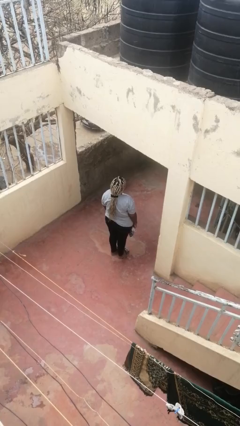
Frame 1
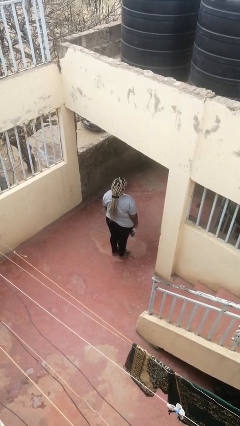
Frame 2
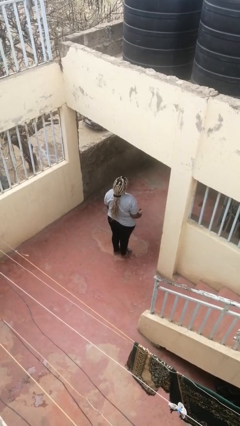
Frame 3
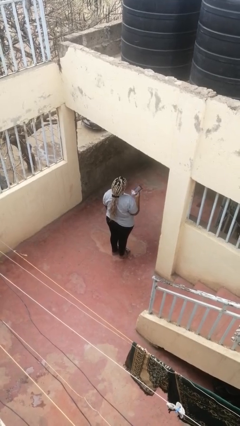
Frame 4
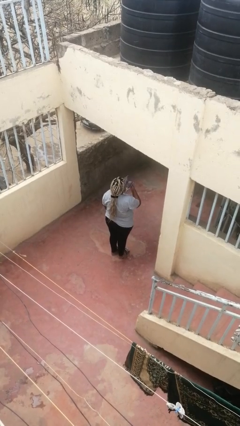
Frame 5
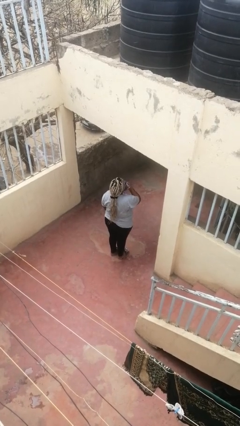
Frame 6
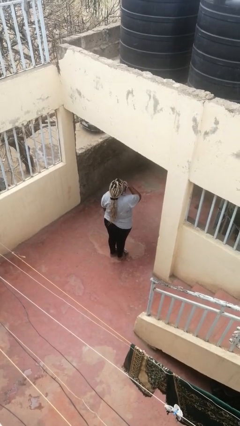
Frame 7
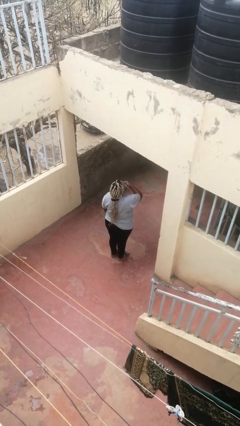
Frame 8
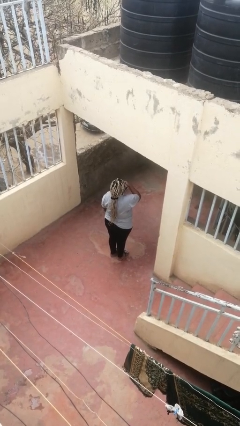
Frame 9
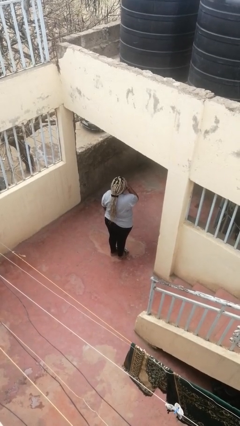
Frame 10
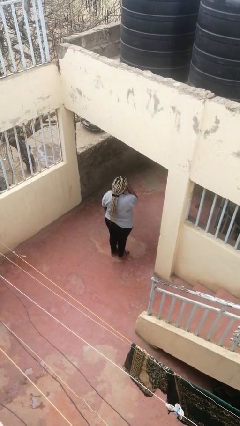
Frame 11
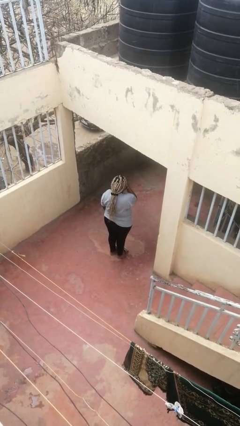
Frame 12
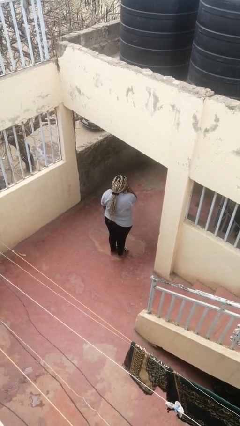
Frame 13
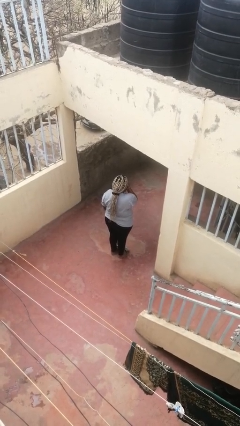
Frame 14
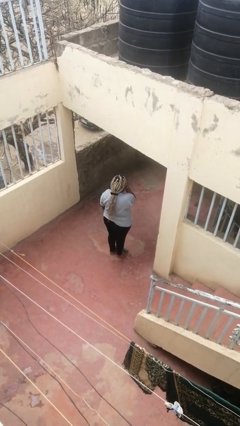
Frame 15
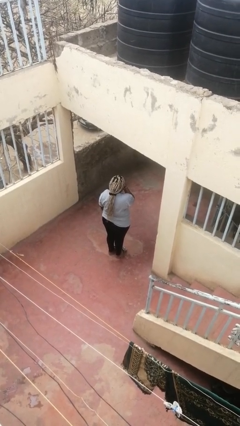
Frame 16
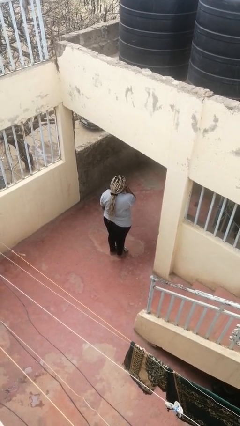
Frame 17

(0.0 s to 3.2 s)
person blows nose

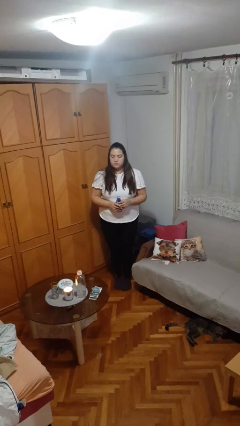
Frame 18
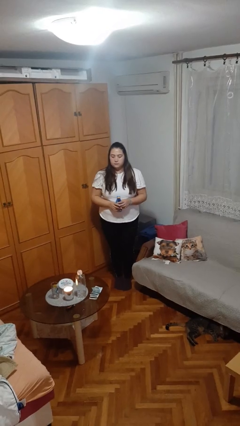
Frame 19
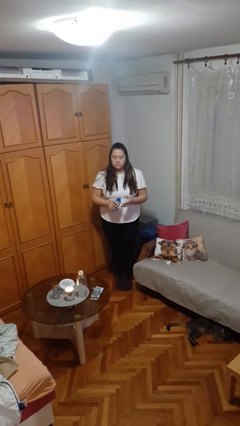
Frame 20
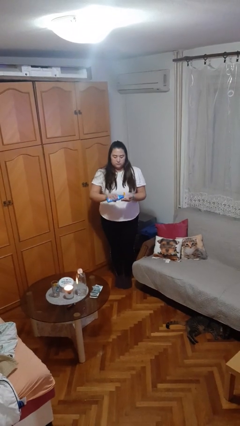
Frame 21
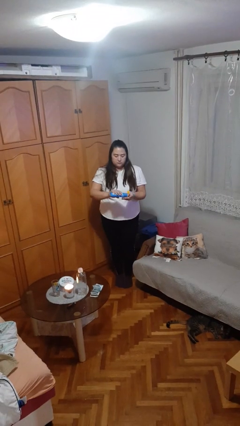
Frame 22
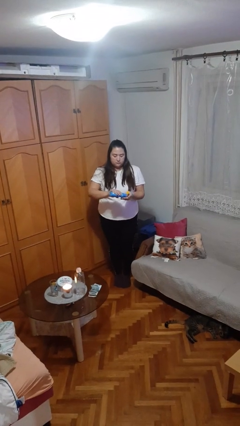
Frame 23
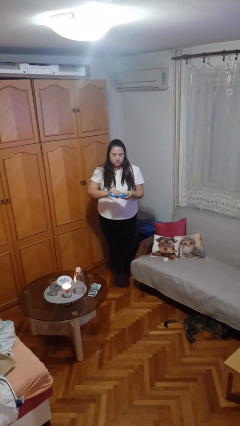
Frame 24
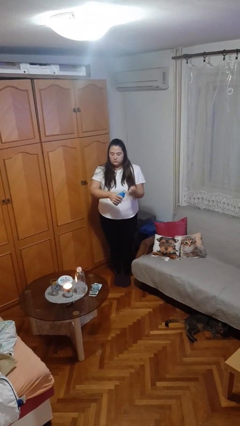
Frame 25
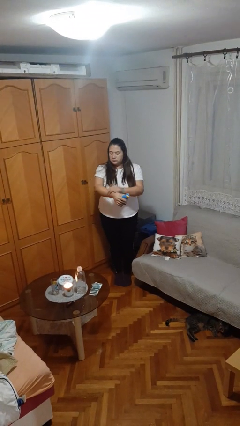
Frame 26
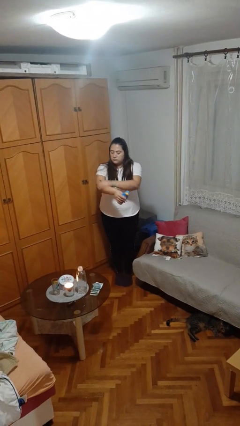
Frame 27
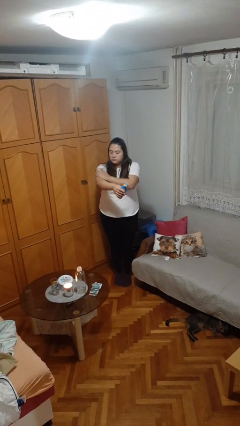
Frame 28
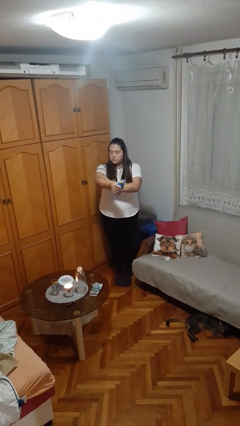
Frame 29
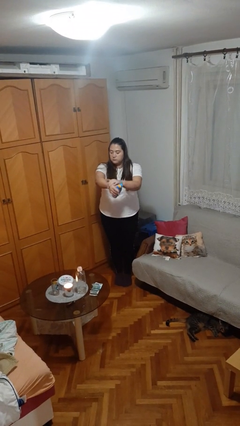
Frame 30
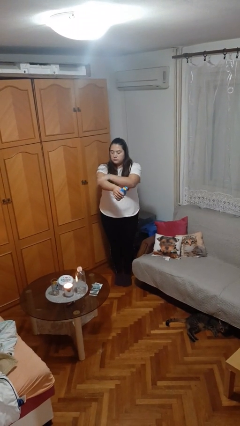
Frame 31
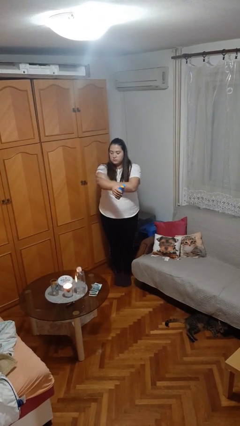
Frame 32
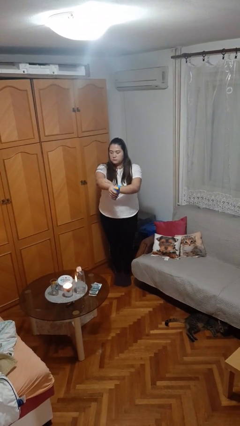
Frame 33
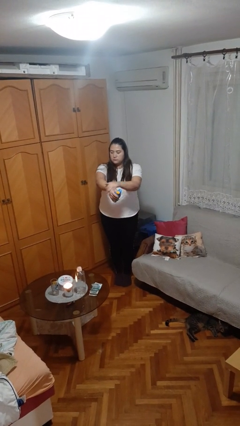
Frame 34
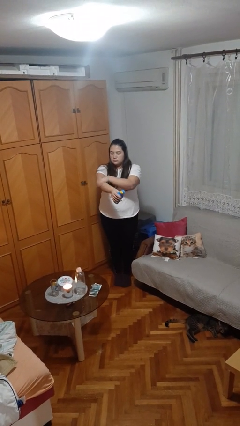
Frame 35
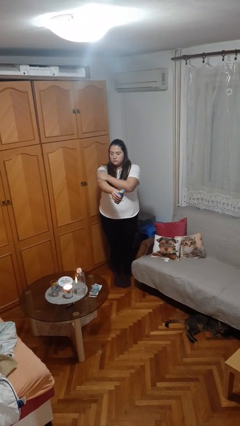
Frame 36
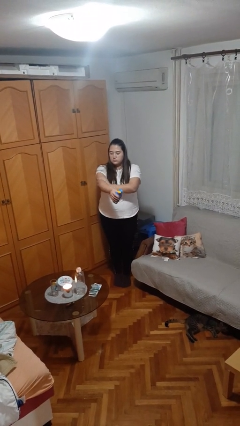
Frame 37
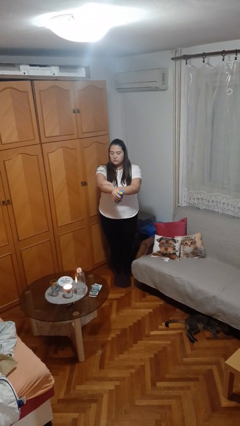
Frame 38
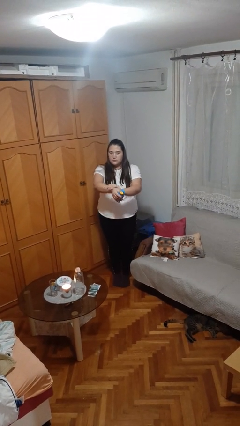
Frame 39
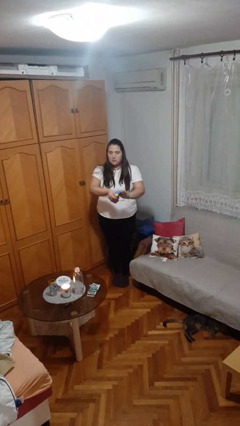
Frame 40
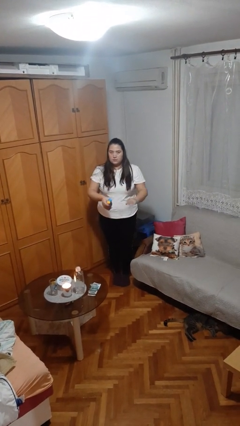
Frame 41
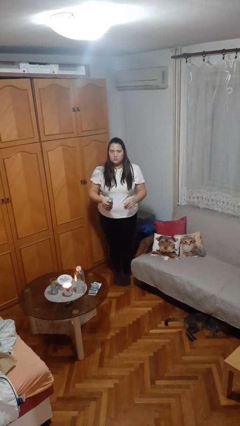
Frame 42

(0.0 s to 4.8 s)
person applies sunscreen

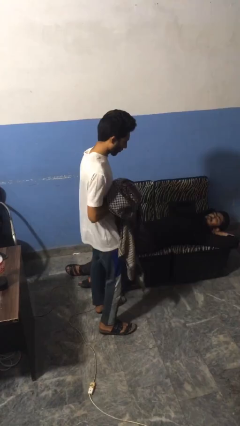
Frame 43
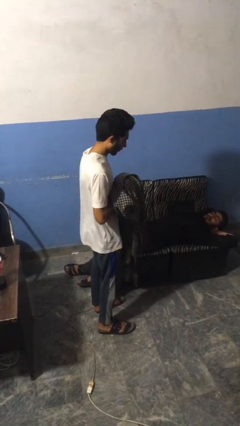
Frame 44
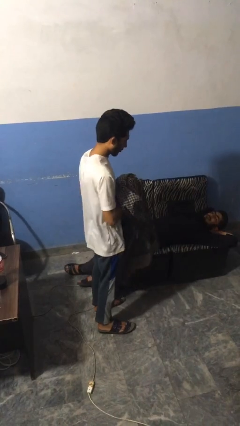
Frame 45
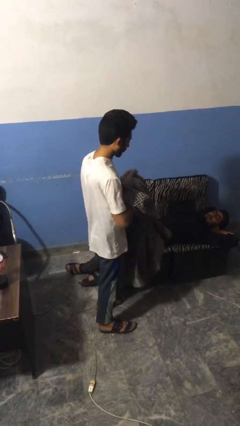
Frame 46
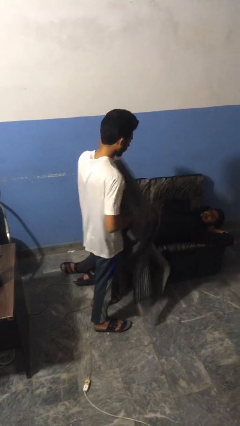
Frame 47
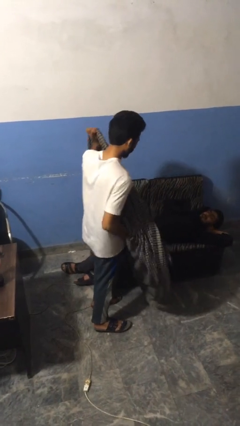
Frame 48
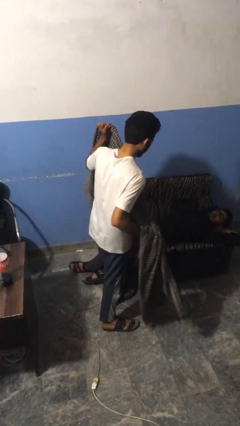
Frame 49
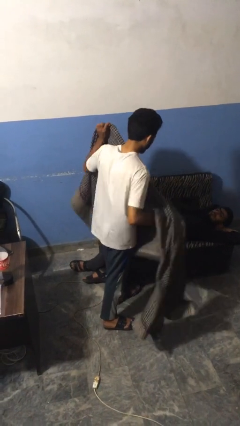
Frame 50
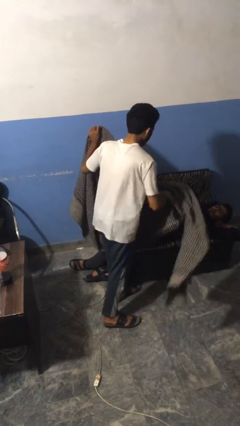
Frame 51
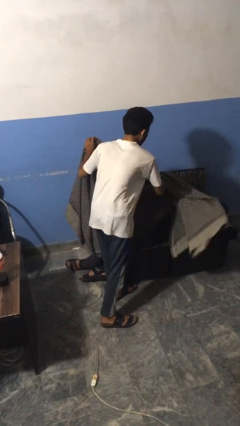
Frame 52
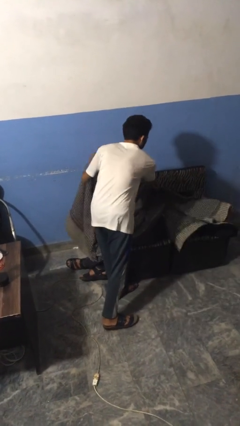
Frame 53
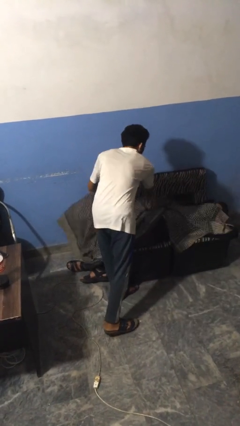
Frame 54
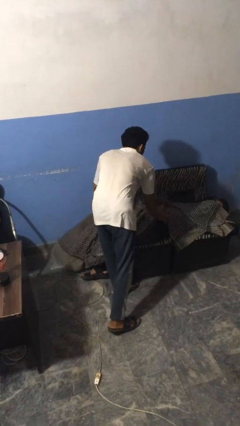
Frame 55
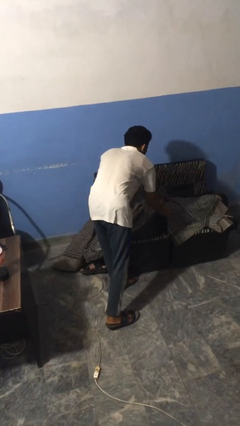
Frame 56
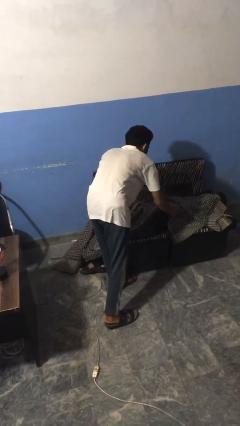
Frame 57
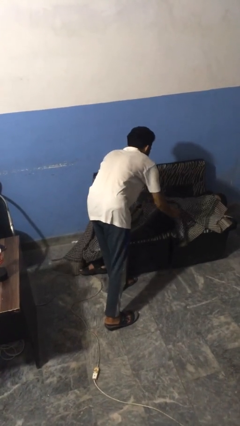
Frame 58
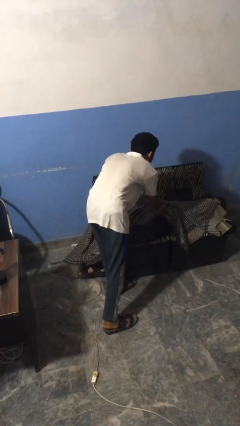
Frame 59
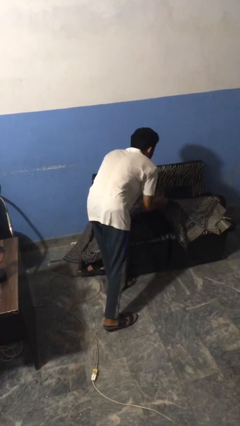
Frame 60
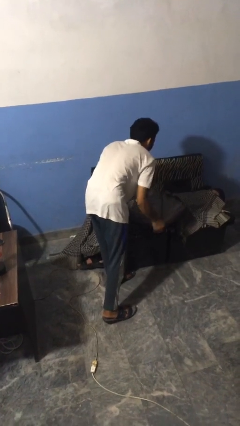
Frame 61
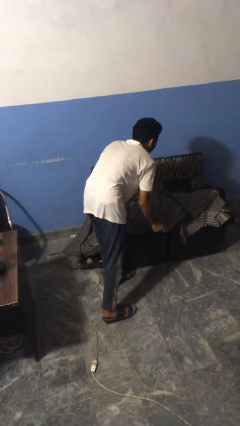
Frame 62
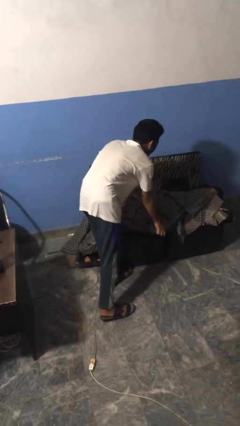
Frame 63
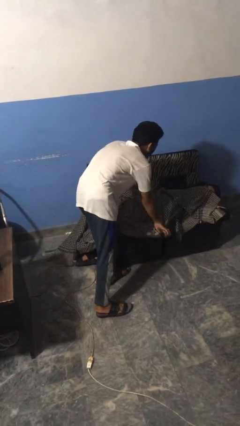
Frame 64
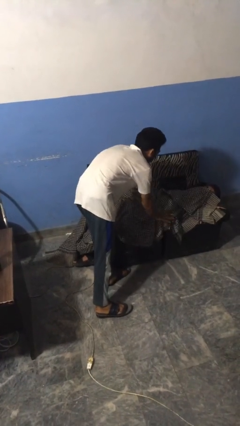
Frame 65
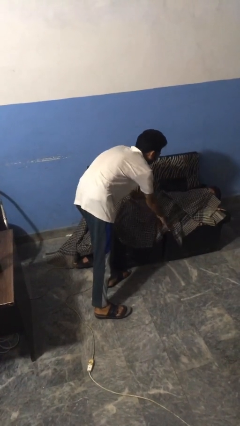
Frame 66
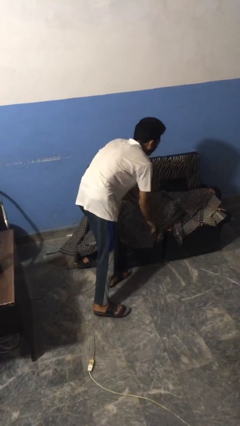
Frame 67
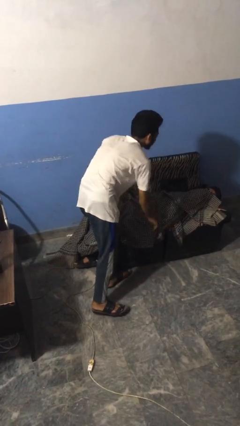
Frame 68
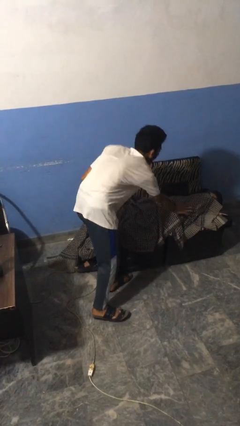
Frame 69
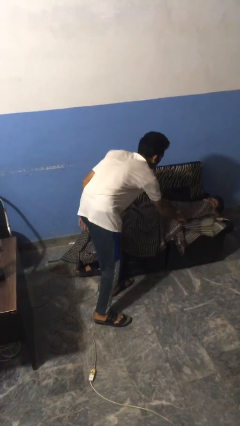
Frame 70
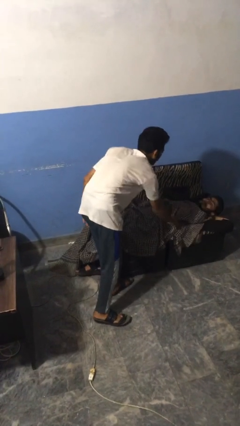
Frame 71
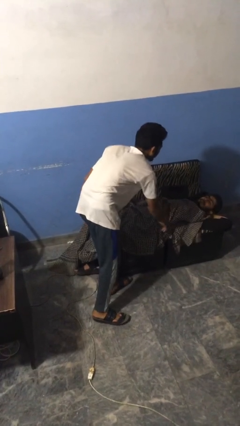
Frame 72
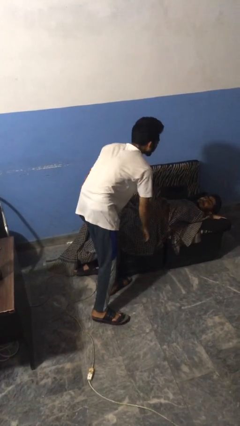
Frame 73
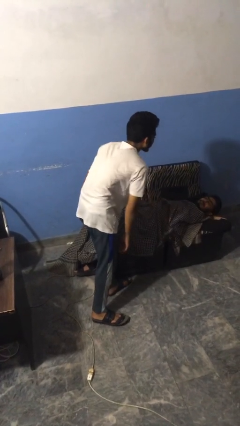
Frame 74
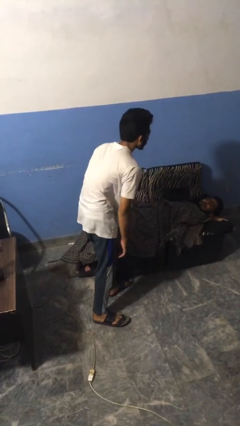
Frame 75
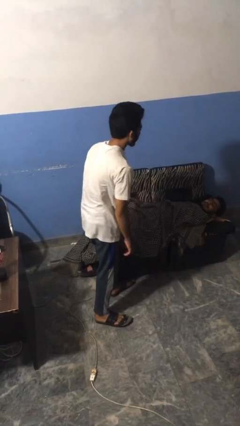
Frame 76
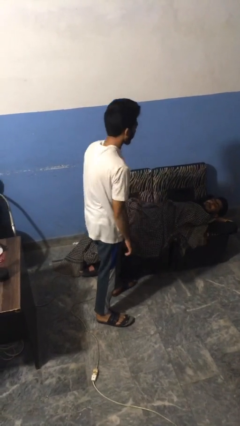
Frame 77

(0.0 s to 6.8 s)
person covers friend with blanket

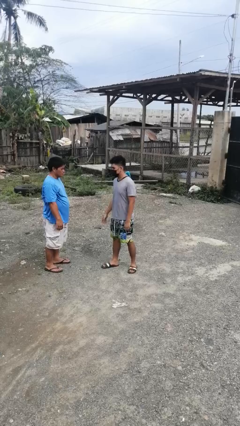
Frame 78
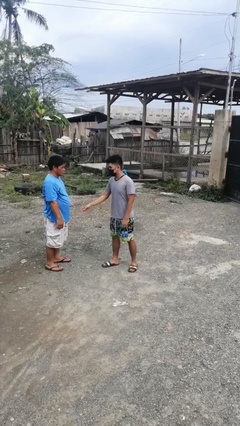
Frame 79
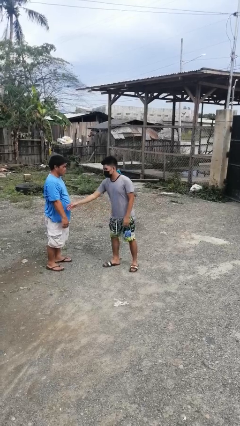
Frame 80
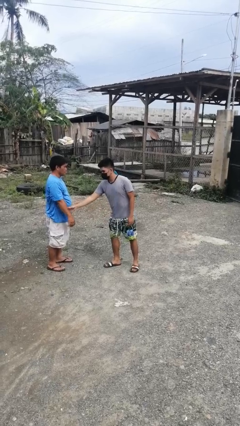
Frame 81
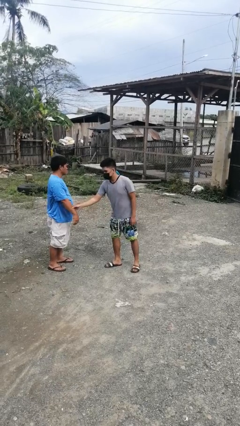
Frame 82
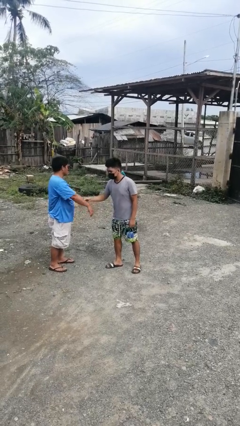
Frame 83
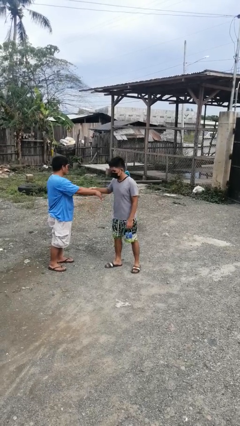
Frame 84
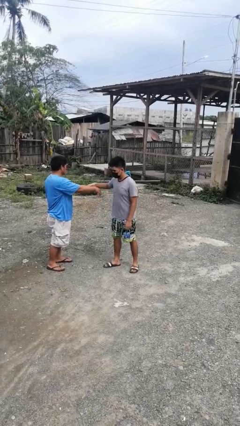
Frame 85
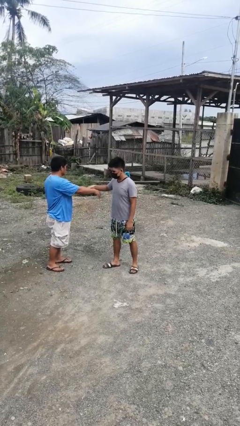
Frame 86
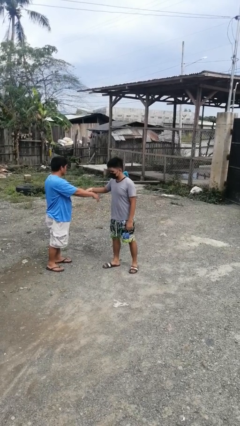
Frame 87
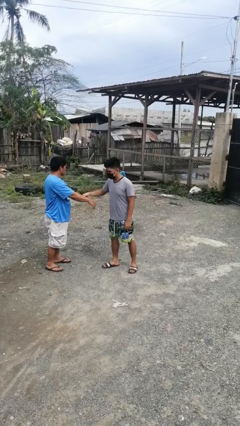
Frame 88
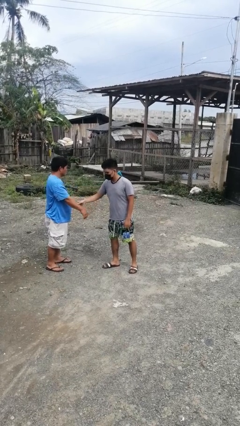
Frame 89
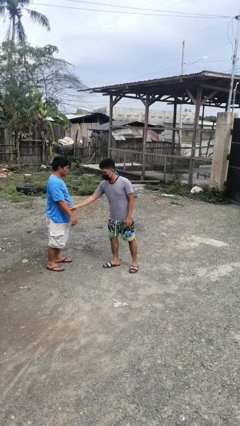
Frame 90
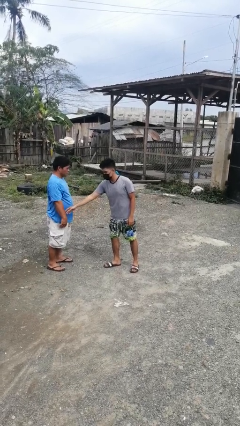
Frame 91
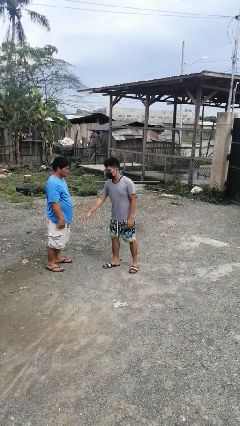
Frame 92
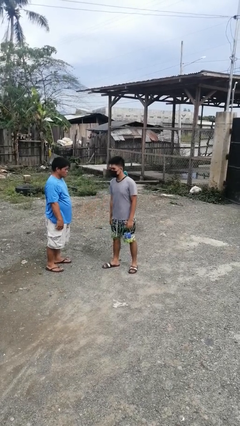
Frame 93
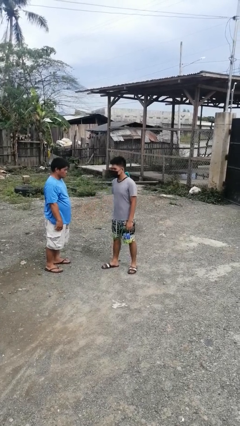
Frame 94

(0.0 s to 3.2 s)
person grabs person by forearm
